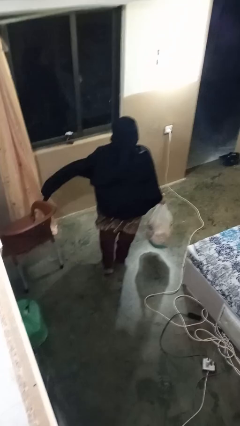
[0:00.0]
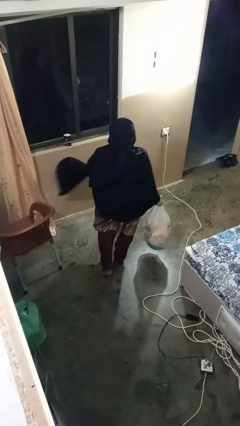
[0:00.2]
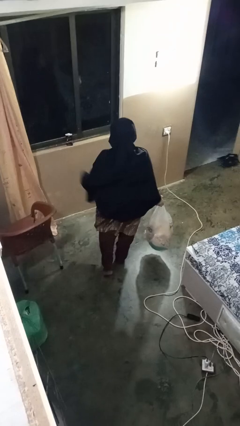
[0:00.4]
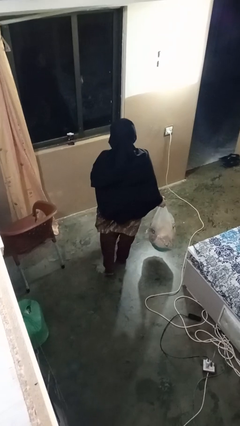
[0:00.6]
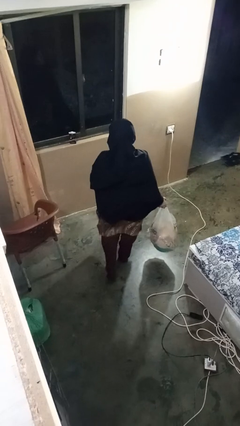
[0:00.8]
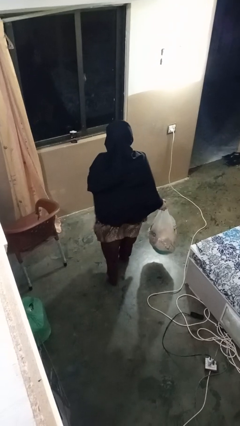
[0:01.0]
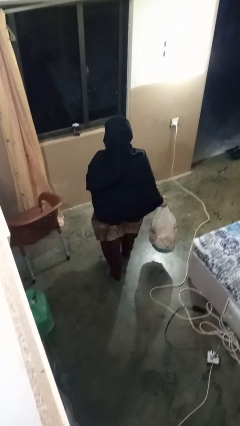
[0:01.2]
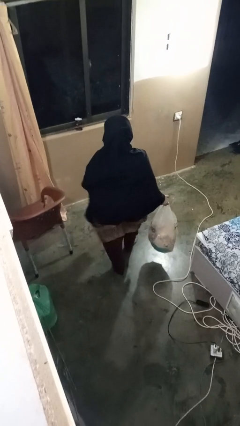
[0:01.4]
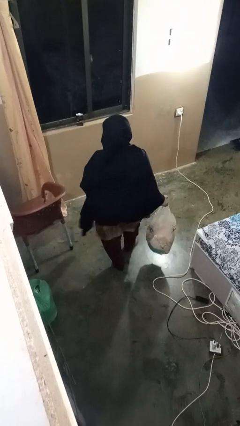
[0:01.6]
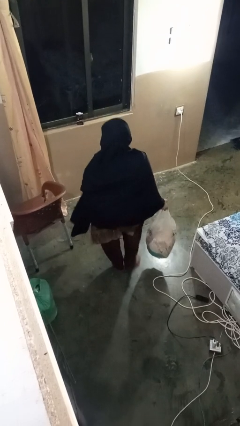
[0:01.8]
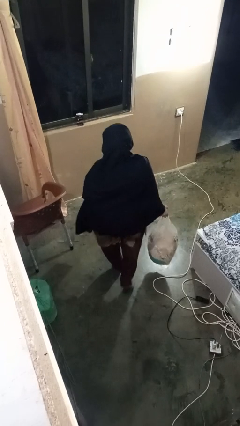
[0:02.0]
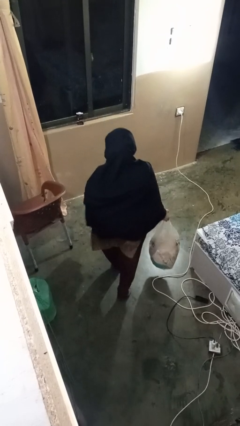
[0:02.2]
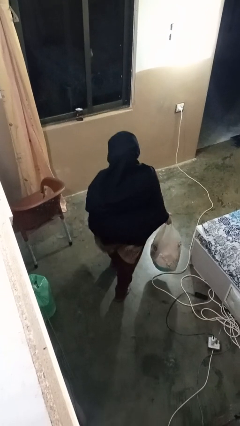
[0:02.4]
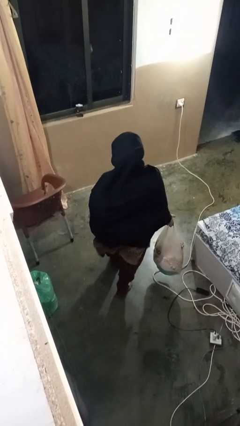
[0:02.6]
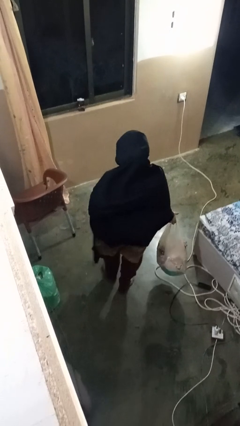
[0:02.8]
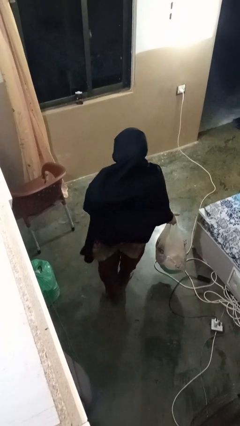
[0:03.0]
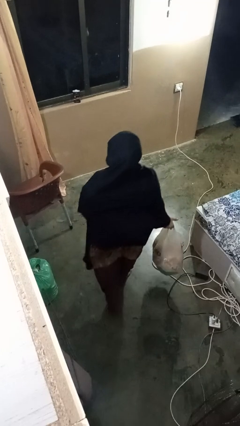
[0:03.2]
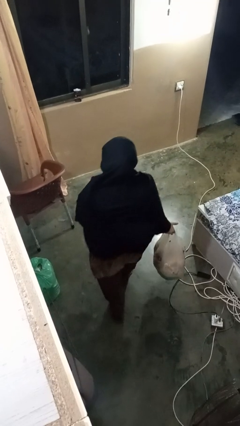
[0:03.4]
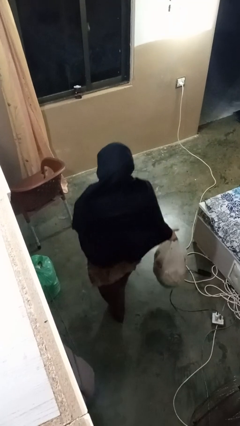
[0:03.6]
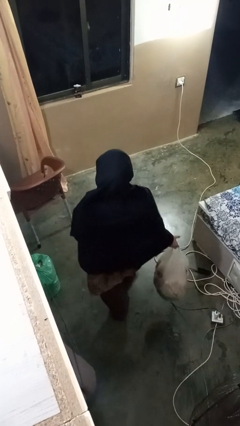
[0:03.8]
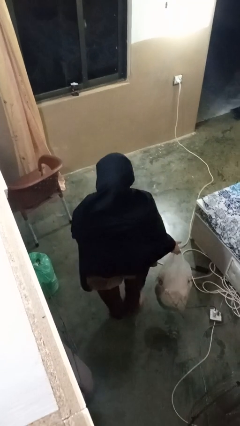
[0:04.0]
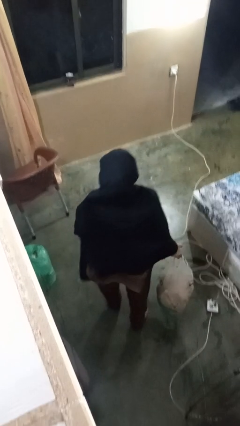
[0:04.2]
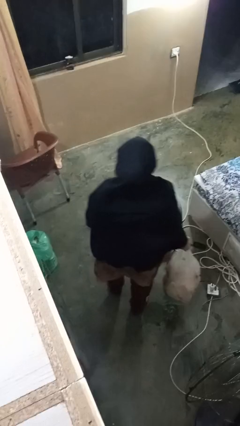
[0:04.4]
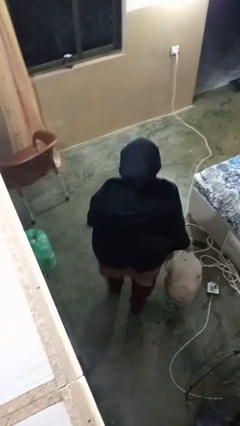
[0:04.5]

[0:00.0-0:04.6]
person carries groceries

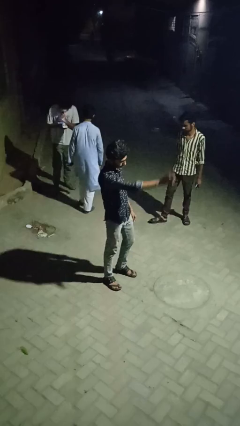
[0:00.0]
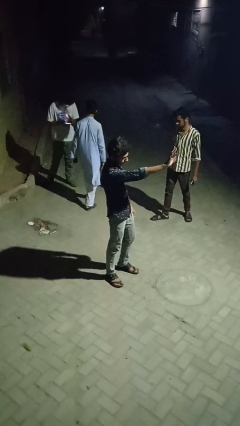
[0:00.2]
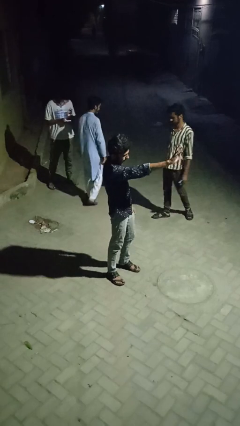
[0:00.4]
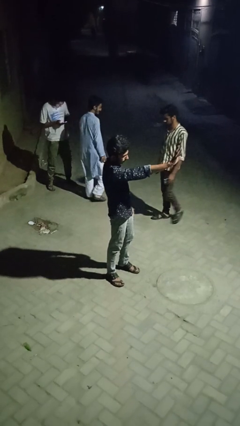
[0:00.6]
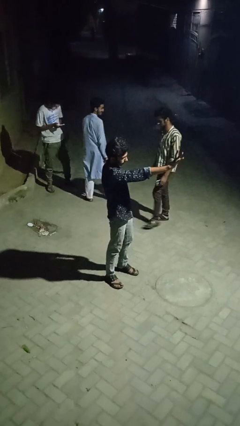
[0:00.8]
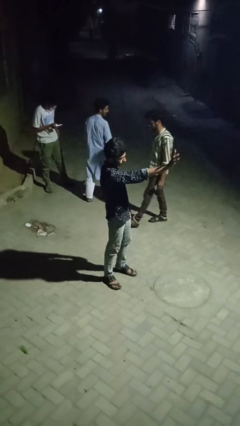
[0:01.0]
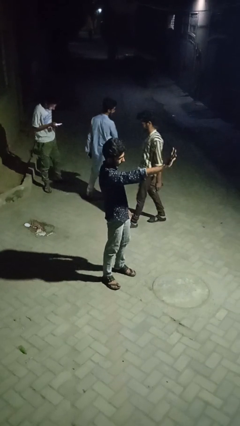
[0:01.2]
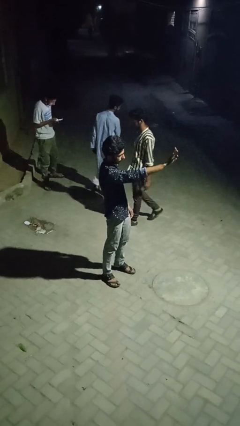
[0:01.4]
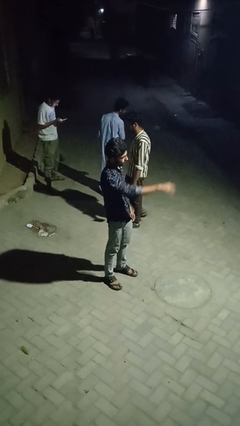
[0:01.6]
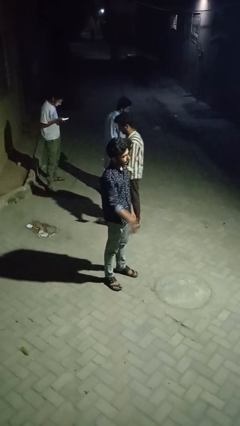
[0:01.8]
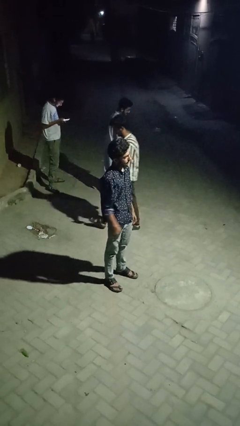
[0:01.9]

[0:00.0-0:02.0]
person waves at person

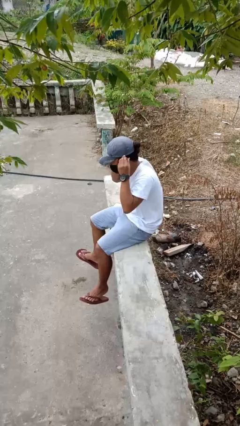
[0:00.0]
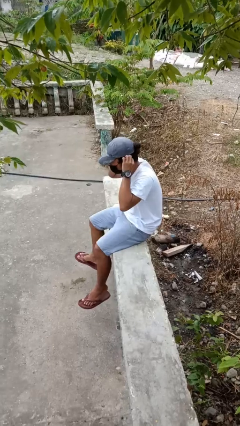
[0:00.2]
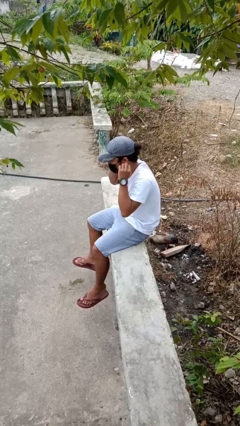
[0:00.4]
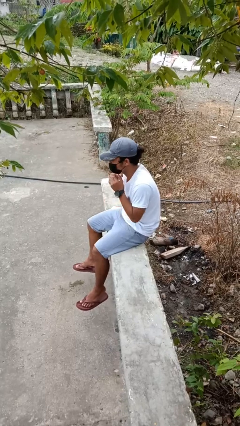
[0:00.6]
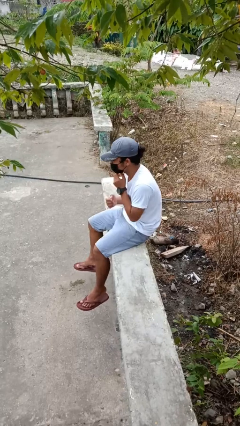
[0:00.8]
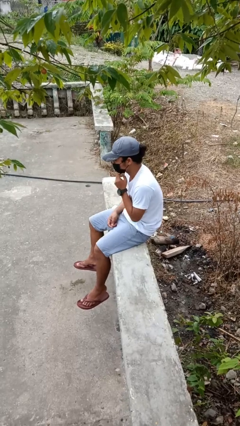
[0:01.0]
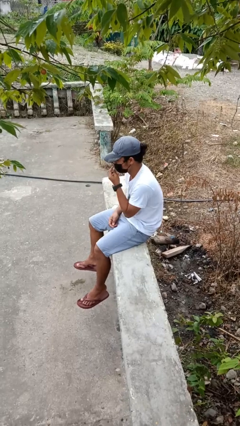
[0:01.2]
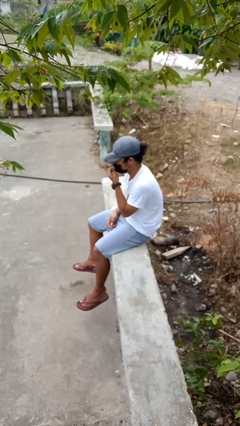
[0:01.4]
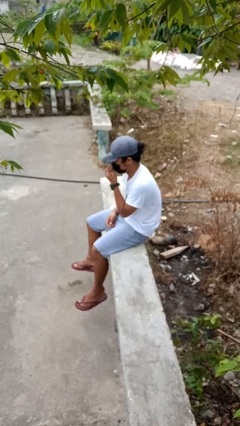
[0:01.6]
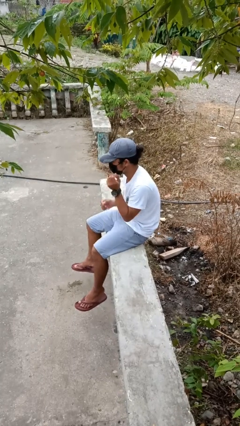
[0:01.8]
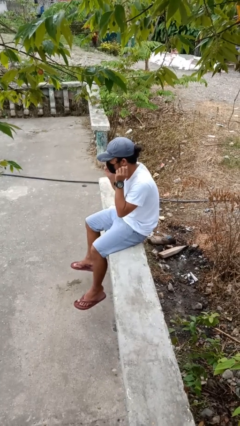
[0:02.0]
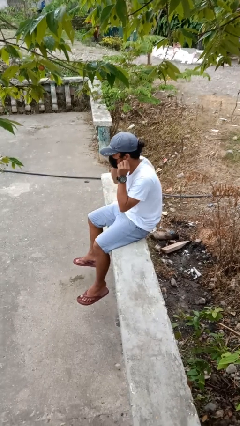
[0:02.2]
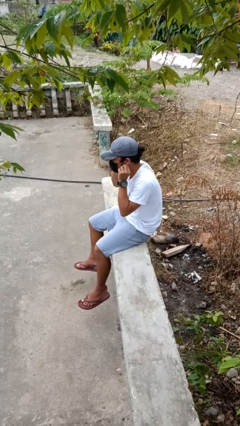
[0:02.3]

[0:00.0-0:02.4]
person puts on facemask

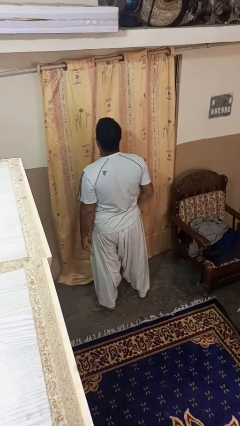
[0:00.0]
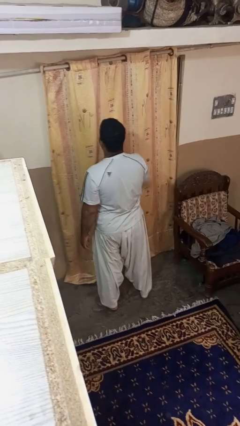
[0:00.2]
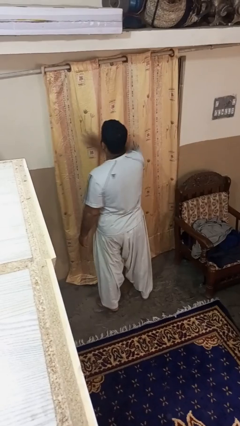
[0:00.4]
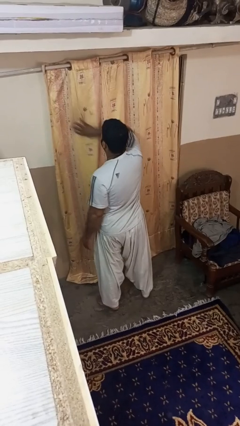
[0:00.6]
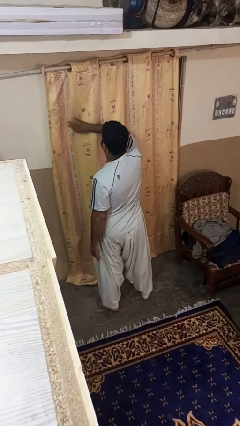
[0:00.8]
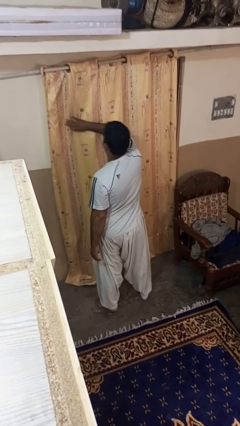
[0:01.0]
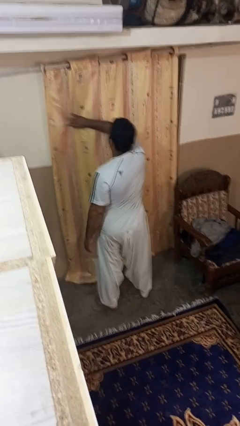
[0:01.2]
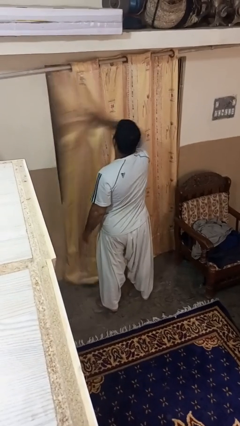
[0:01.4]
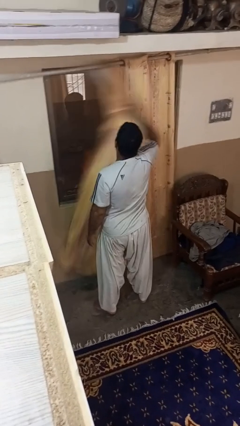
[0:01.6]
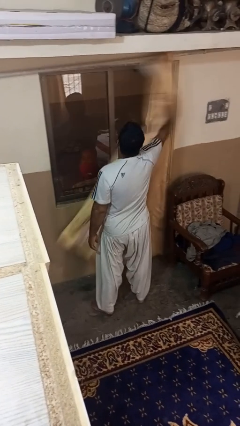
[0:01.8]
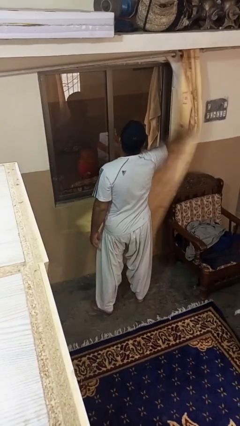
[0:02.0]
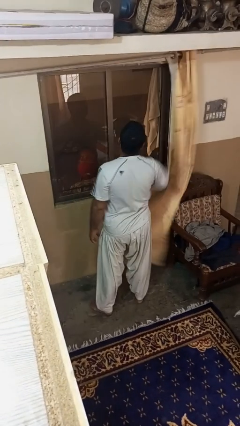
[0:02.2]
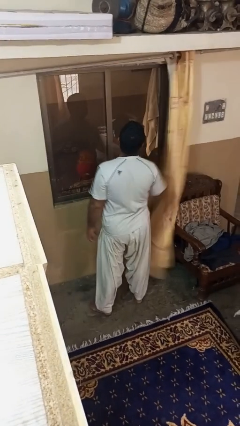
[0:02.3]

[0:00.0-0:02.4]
person opens curtains

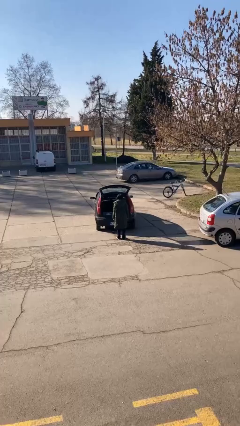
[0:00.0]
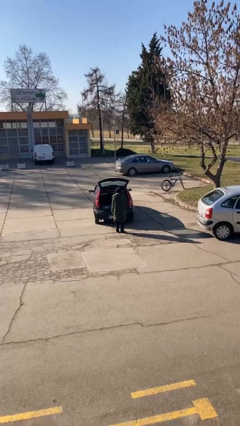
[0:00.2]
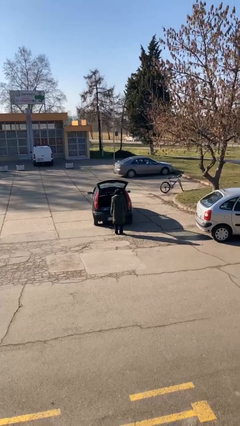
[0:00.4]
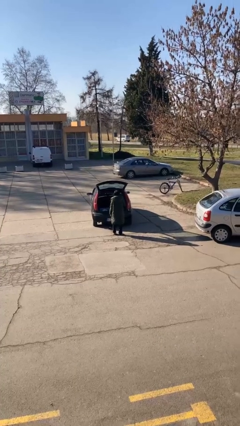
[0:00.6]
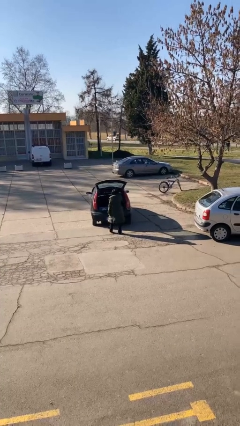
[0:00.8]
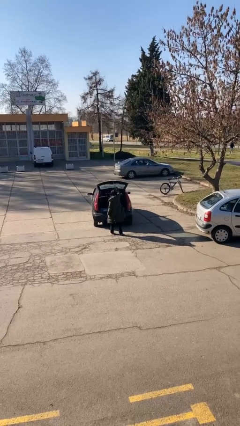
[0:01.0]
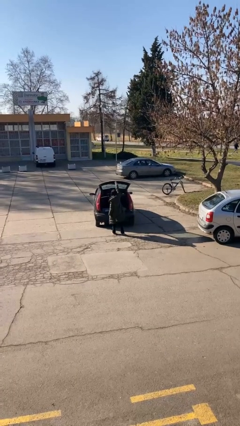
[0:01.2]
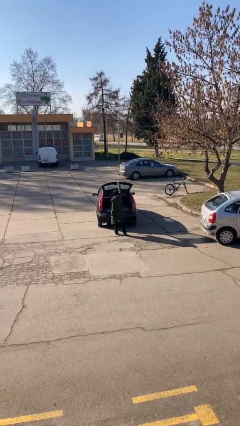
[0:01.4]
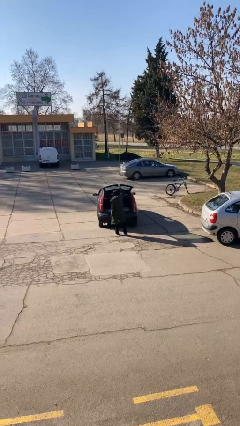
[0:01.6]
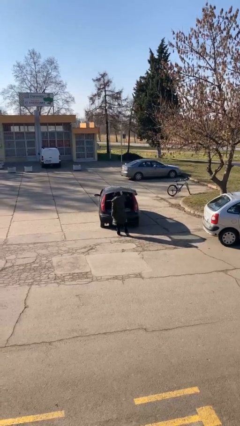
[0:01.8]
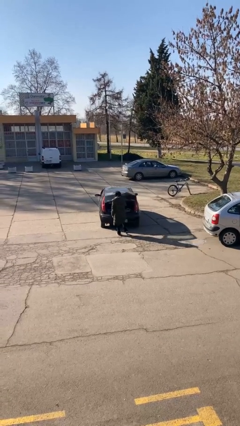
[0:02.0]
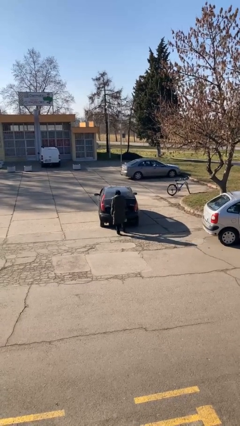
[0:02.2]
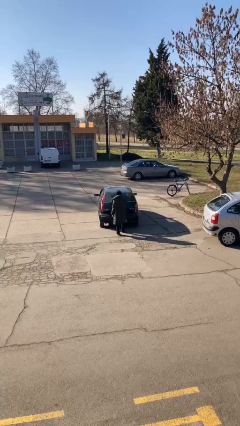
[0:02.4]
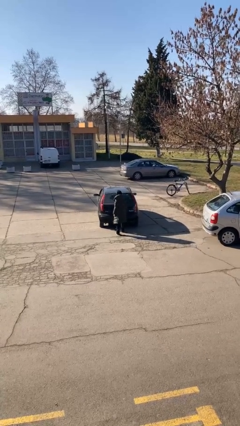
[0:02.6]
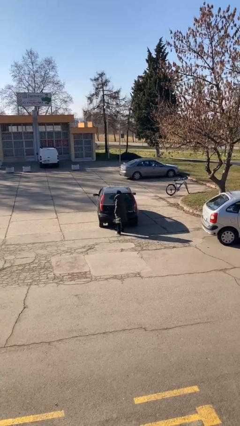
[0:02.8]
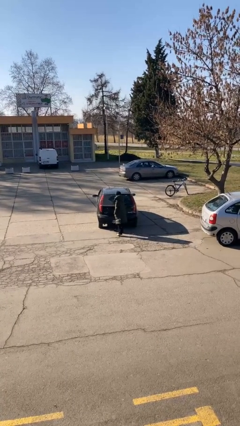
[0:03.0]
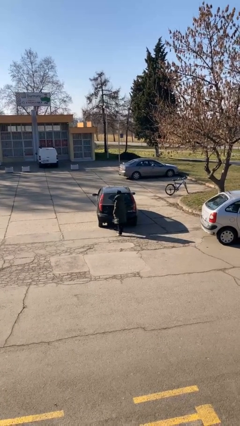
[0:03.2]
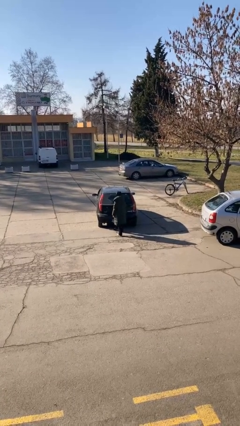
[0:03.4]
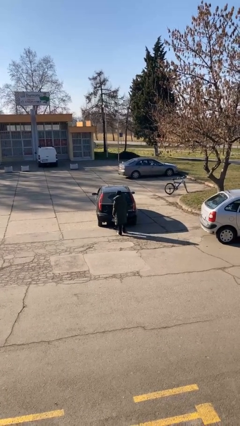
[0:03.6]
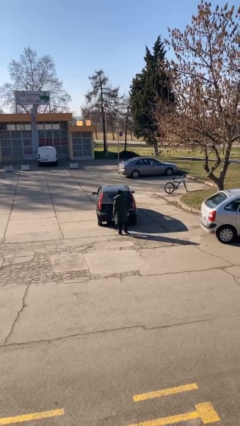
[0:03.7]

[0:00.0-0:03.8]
person closes car trunk

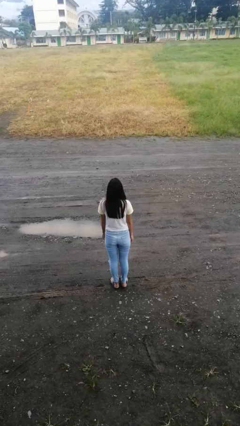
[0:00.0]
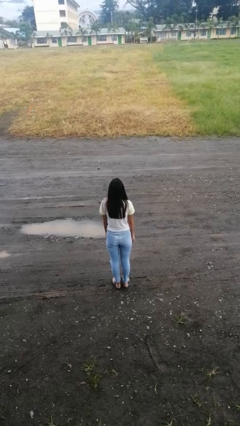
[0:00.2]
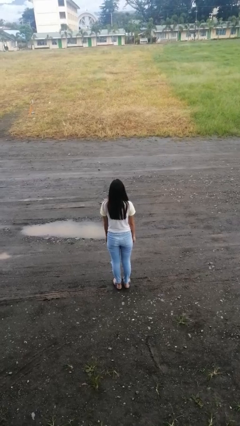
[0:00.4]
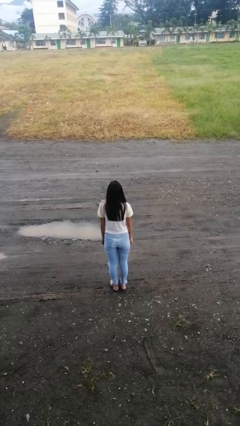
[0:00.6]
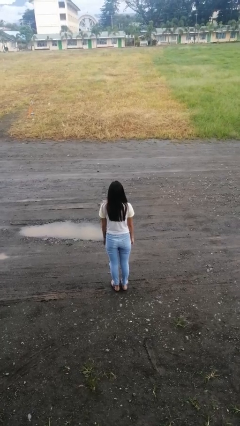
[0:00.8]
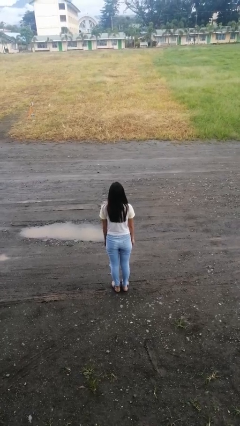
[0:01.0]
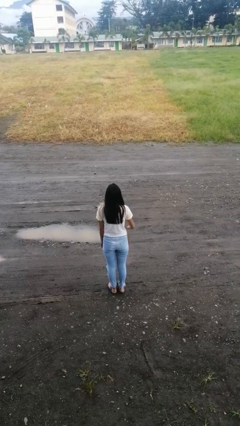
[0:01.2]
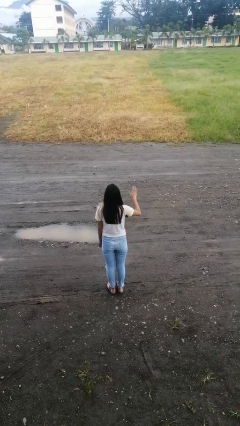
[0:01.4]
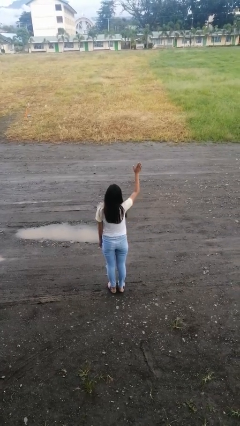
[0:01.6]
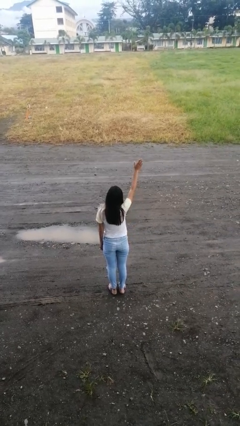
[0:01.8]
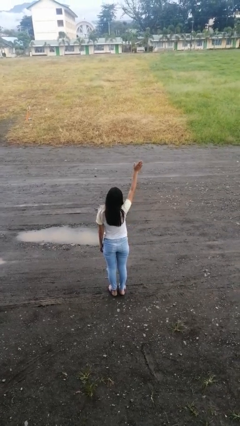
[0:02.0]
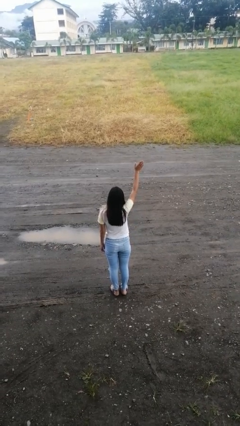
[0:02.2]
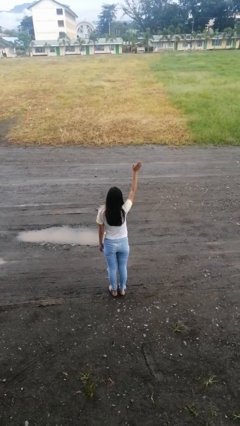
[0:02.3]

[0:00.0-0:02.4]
person gestures raise hand
